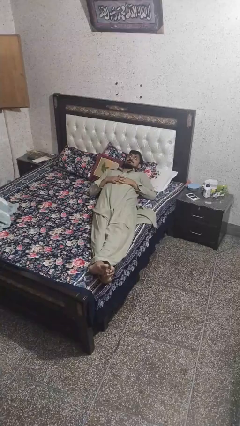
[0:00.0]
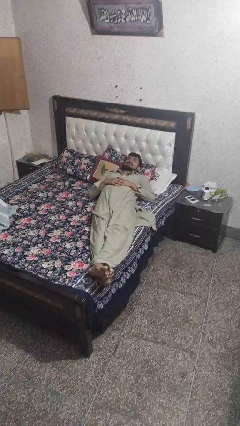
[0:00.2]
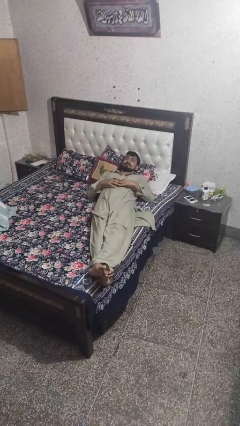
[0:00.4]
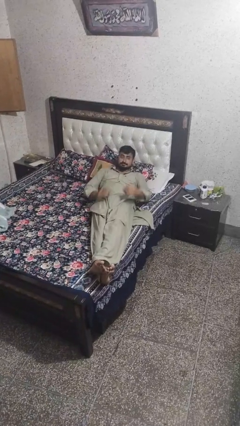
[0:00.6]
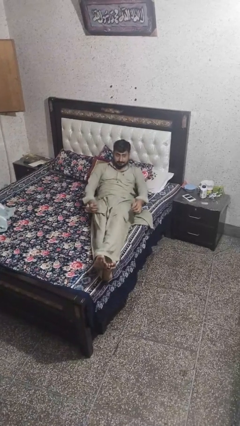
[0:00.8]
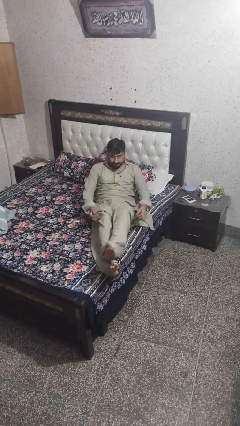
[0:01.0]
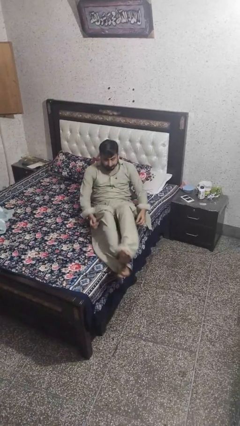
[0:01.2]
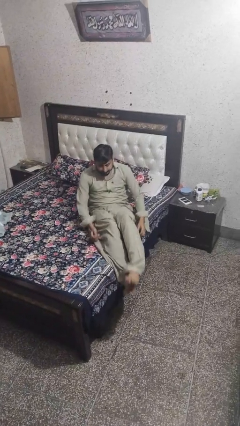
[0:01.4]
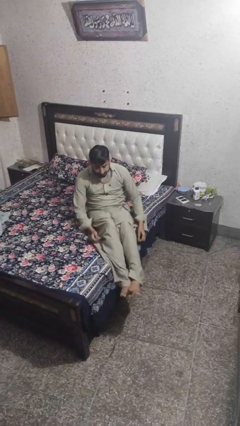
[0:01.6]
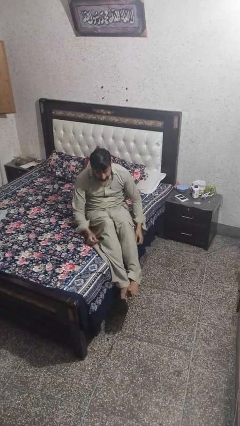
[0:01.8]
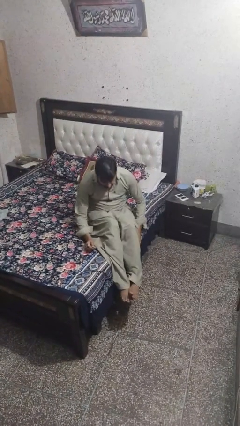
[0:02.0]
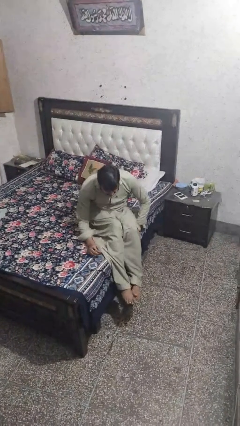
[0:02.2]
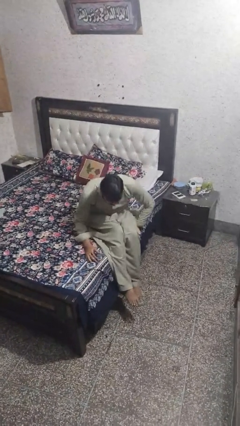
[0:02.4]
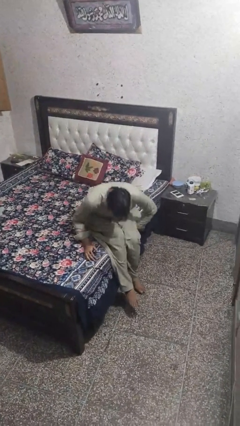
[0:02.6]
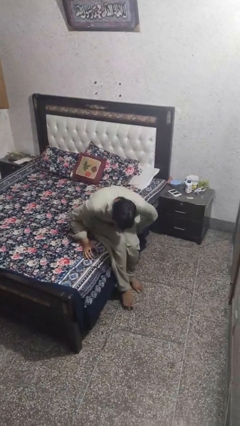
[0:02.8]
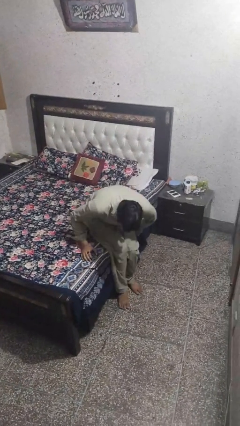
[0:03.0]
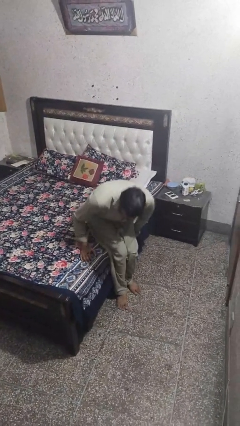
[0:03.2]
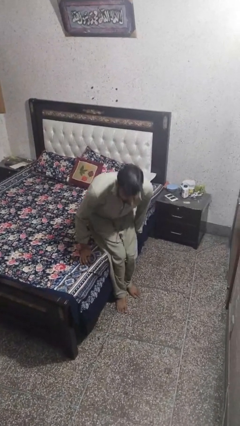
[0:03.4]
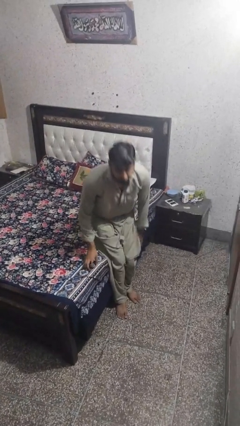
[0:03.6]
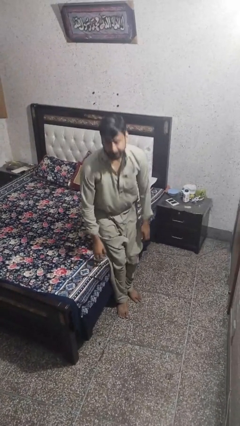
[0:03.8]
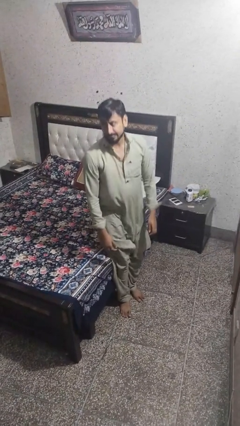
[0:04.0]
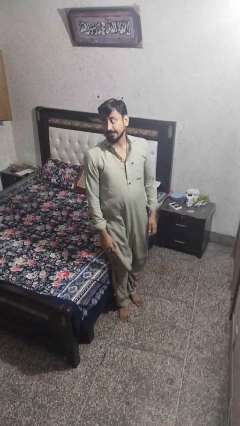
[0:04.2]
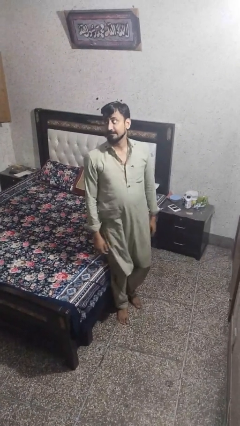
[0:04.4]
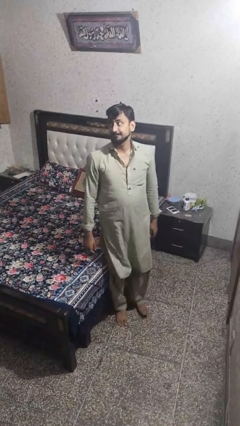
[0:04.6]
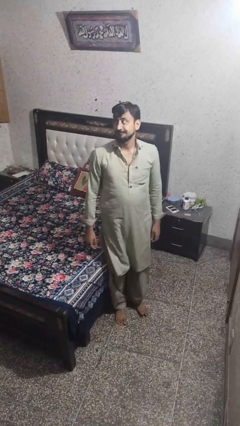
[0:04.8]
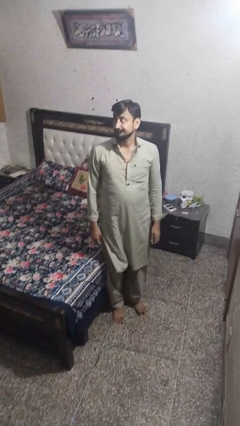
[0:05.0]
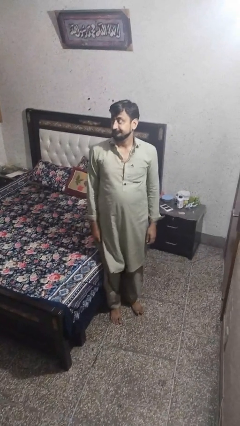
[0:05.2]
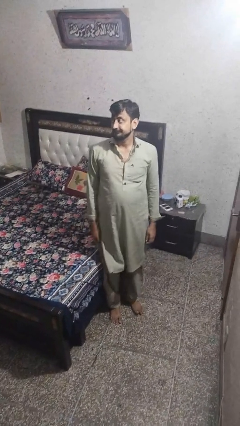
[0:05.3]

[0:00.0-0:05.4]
person stands up

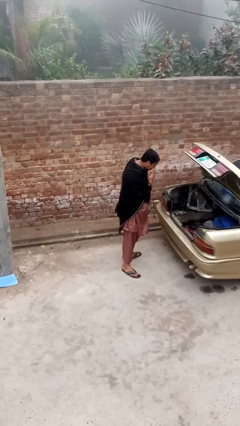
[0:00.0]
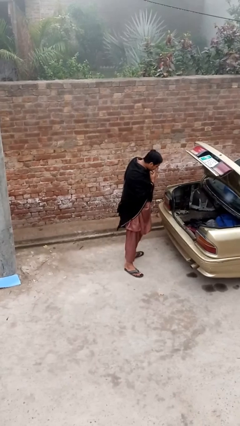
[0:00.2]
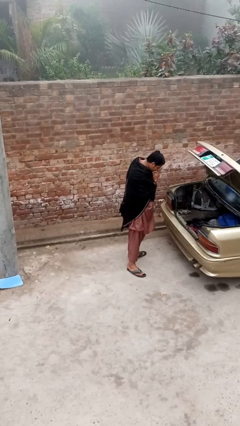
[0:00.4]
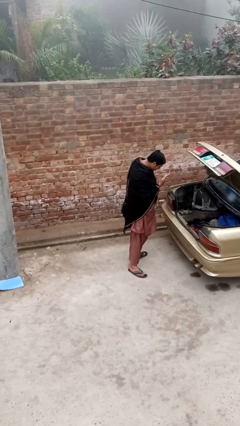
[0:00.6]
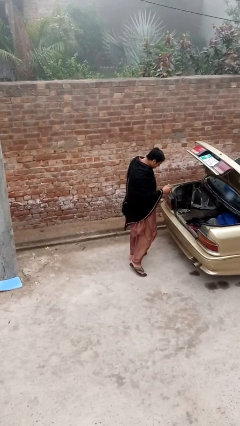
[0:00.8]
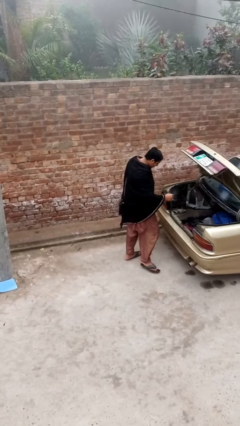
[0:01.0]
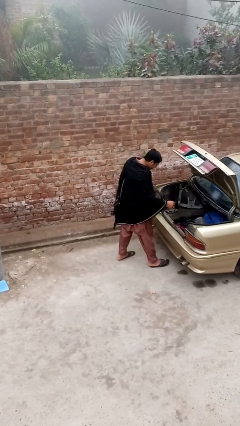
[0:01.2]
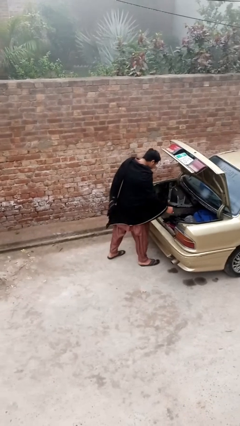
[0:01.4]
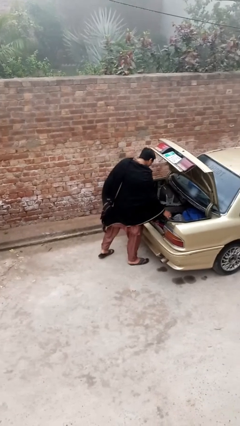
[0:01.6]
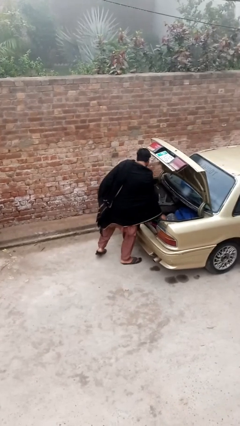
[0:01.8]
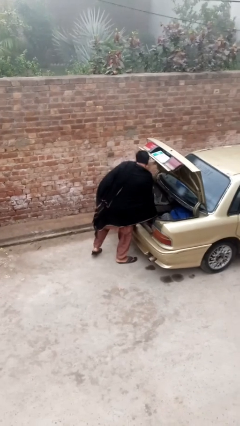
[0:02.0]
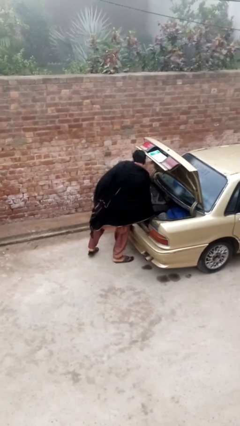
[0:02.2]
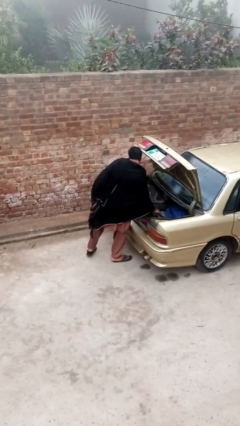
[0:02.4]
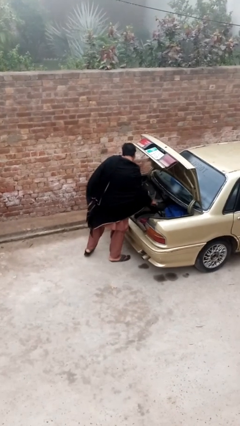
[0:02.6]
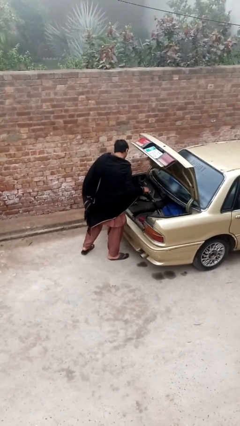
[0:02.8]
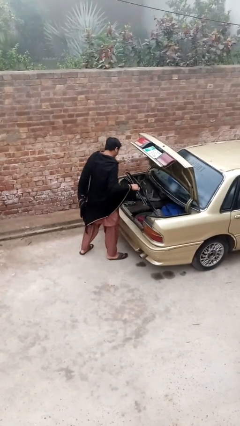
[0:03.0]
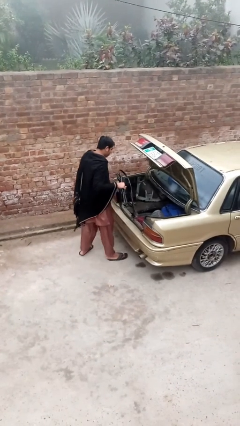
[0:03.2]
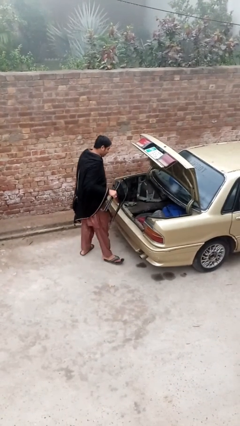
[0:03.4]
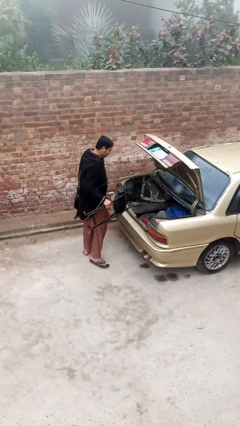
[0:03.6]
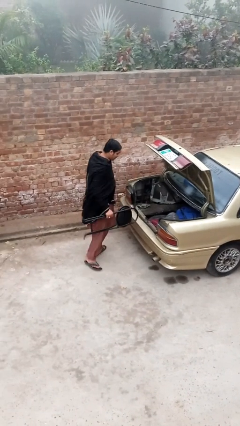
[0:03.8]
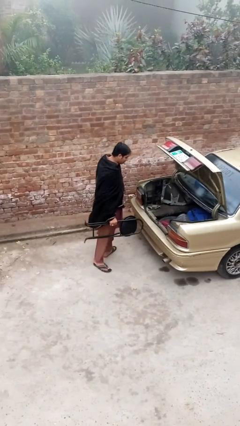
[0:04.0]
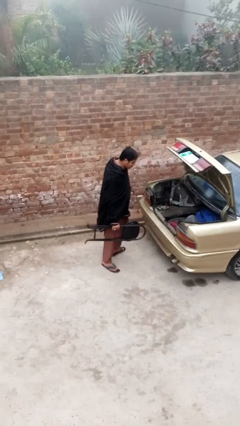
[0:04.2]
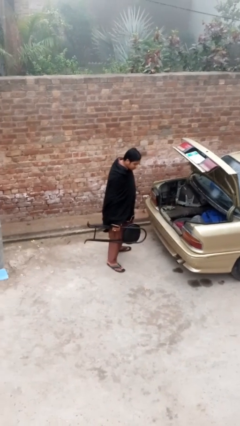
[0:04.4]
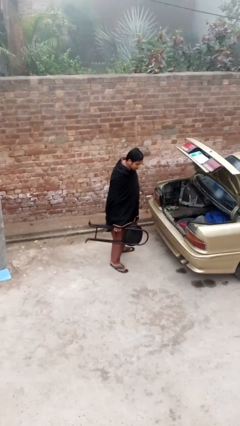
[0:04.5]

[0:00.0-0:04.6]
person unloads car

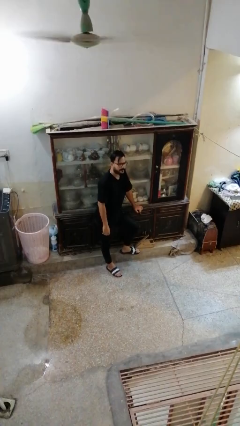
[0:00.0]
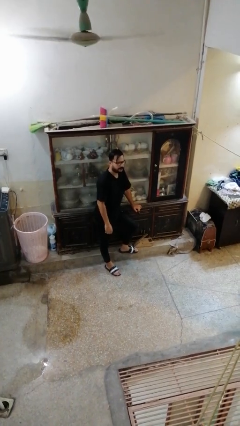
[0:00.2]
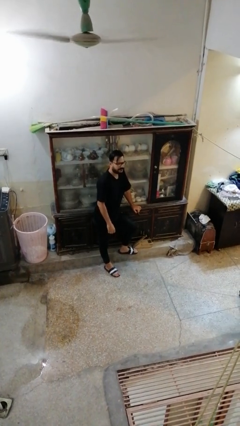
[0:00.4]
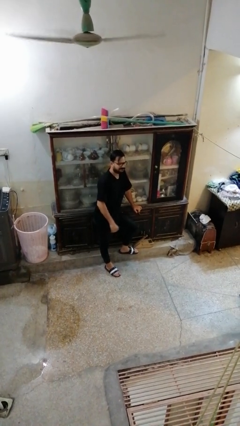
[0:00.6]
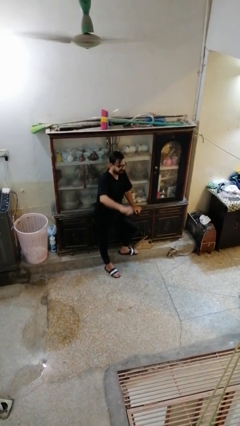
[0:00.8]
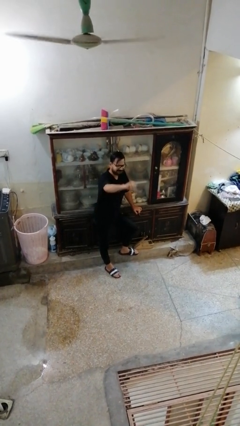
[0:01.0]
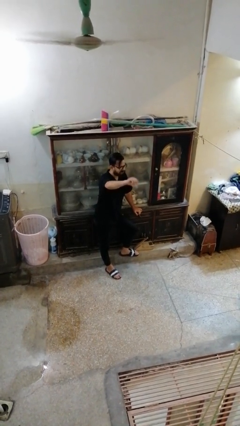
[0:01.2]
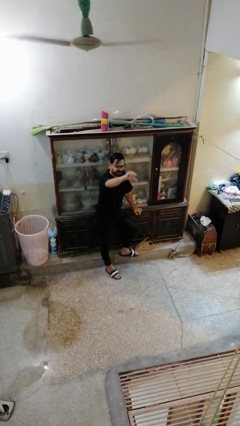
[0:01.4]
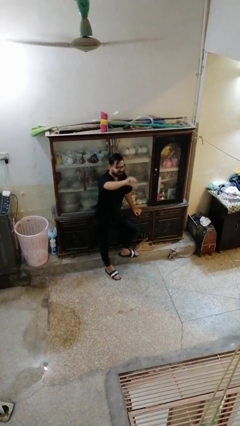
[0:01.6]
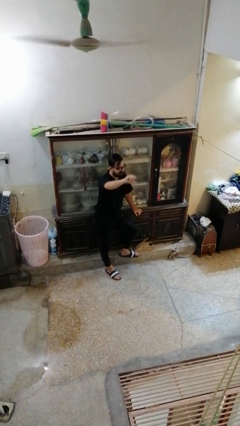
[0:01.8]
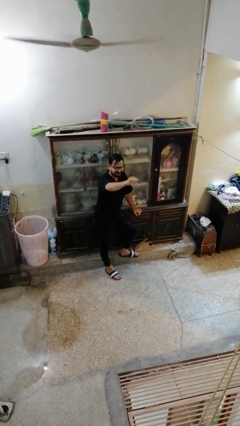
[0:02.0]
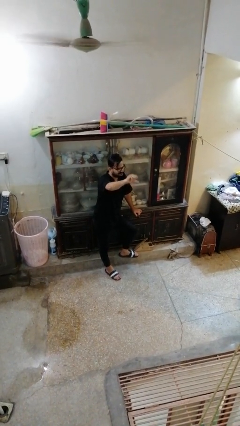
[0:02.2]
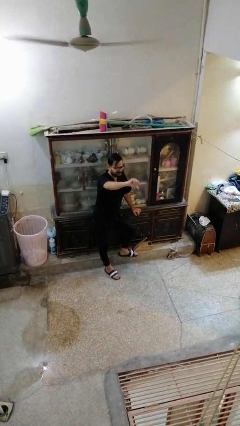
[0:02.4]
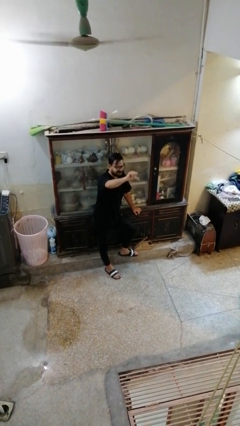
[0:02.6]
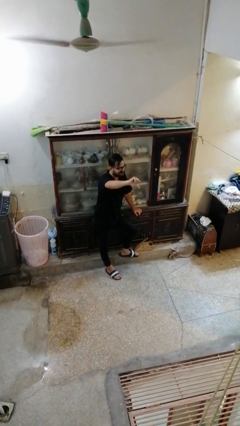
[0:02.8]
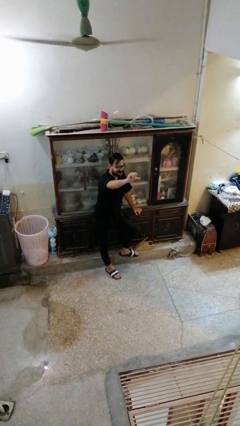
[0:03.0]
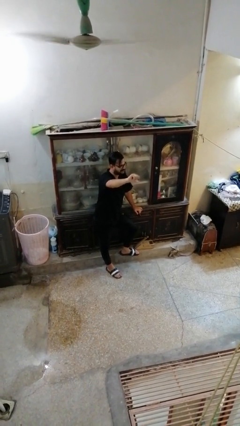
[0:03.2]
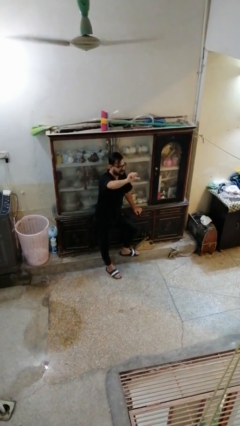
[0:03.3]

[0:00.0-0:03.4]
person gestures thumbs down

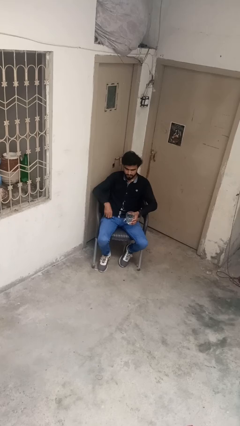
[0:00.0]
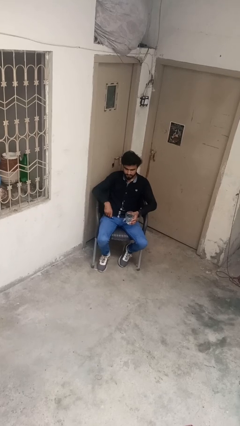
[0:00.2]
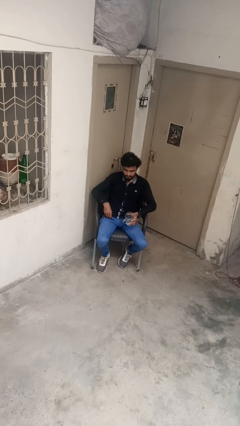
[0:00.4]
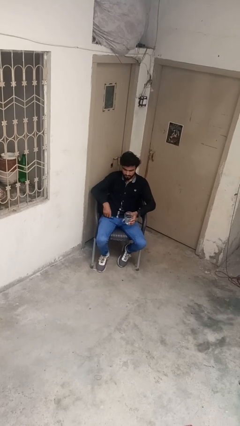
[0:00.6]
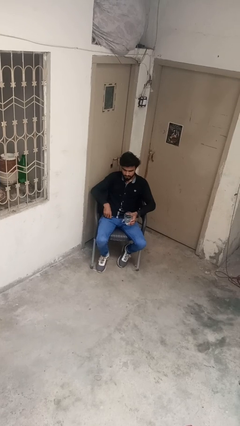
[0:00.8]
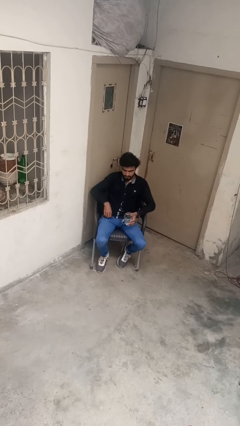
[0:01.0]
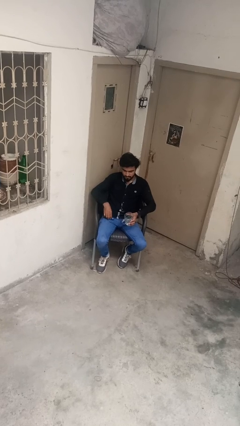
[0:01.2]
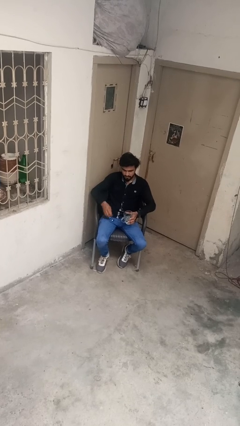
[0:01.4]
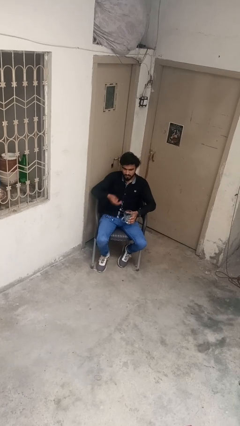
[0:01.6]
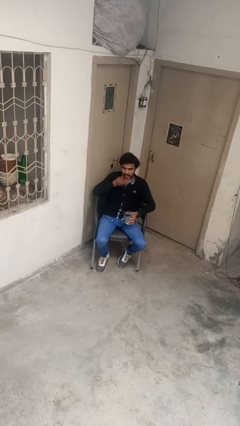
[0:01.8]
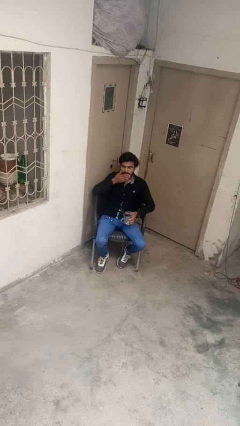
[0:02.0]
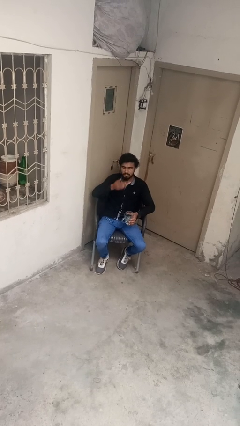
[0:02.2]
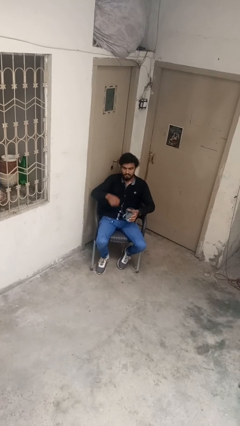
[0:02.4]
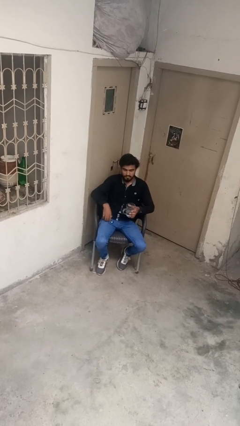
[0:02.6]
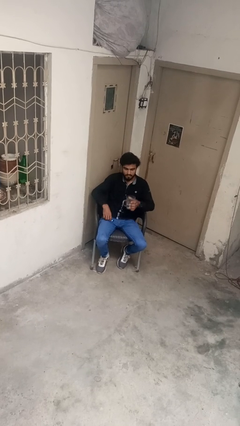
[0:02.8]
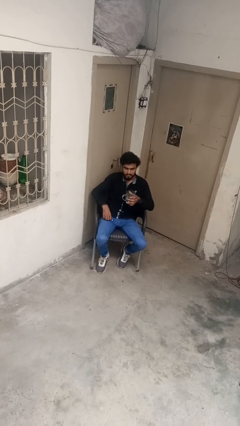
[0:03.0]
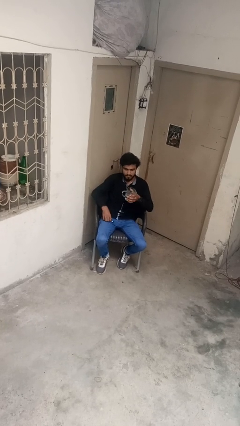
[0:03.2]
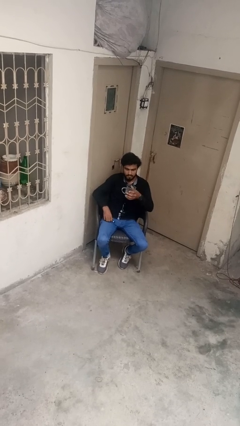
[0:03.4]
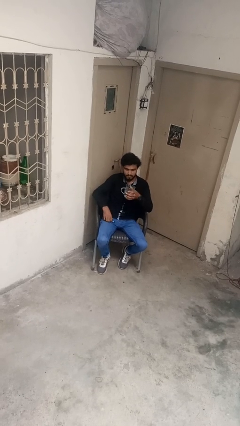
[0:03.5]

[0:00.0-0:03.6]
person takes medicine pills

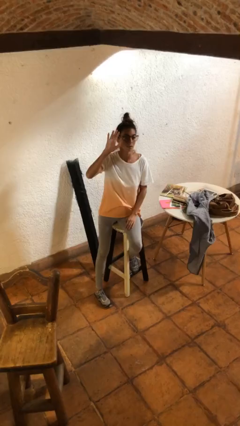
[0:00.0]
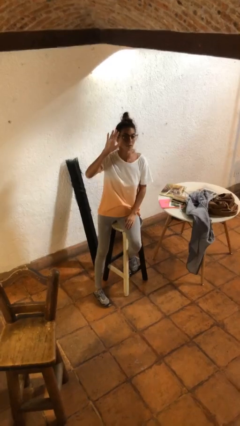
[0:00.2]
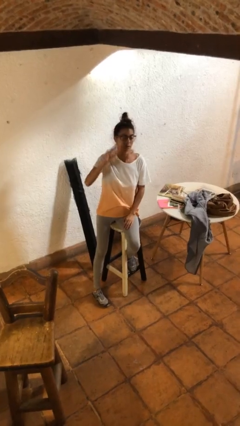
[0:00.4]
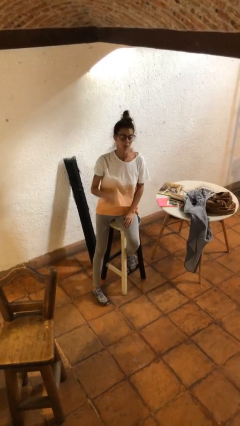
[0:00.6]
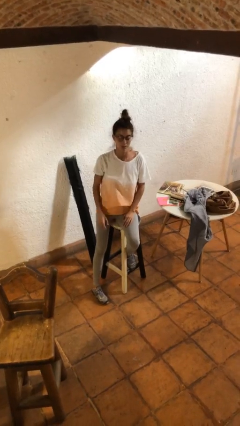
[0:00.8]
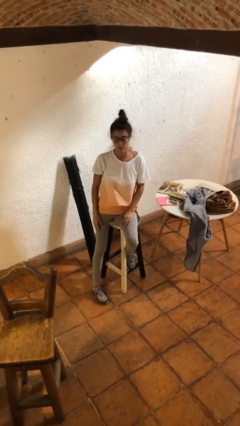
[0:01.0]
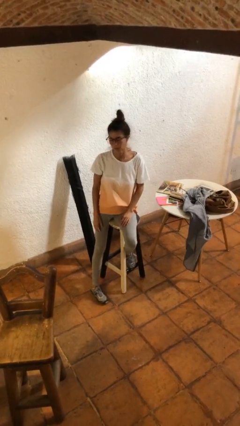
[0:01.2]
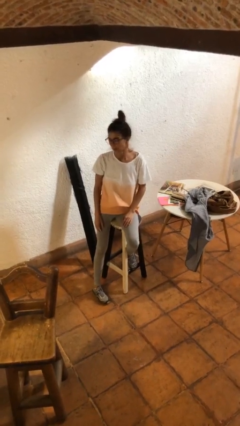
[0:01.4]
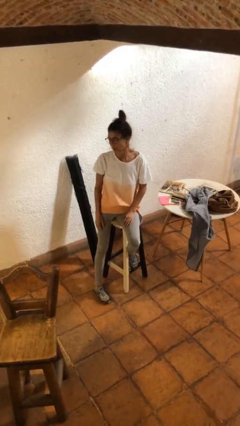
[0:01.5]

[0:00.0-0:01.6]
person gestures lower hand
